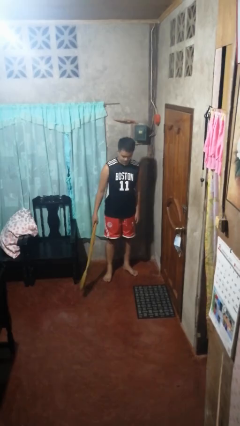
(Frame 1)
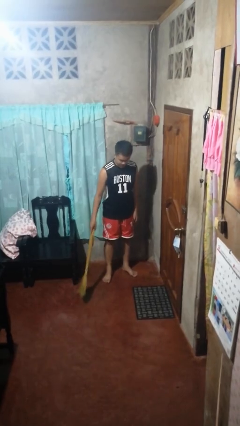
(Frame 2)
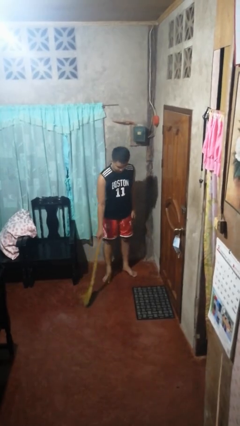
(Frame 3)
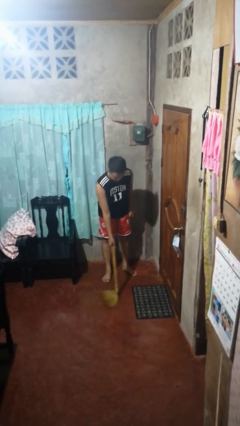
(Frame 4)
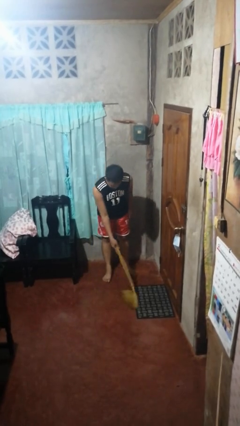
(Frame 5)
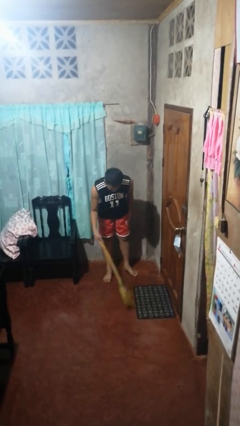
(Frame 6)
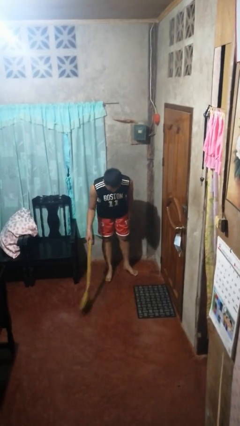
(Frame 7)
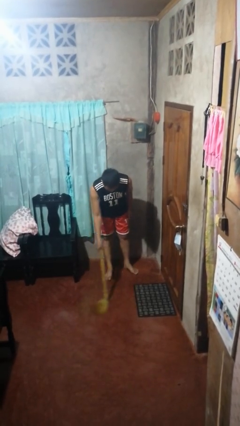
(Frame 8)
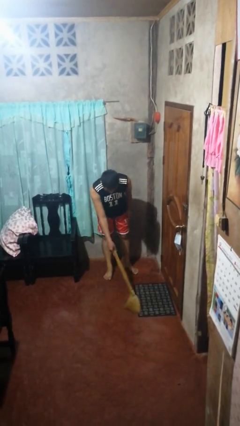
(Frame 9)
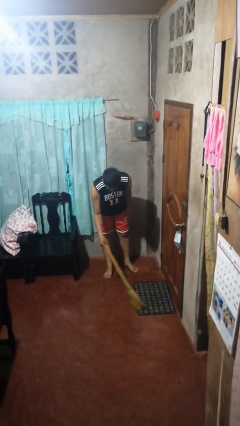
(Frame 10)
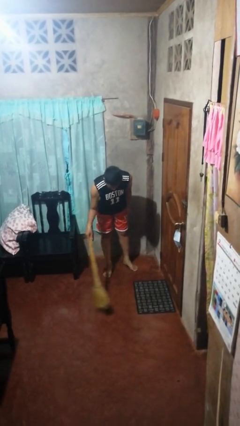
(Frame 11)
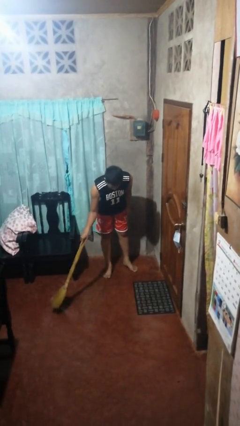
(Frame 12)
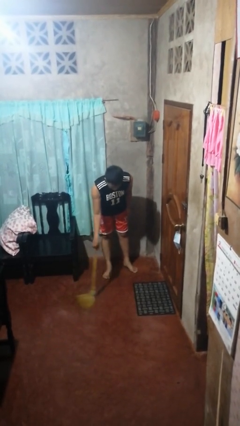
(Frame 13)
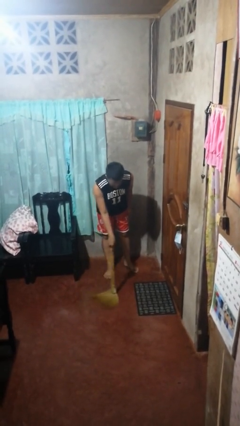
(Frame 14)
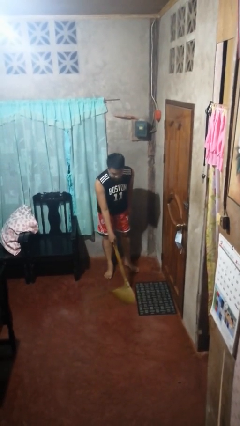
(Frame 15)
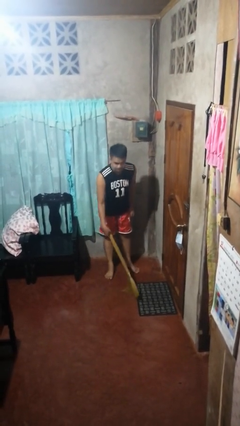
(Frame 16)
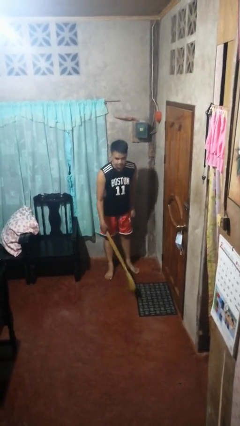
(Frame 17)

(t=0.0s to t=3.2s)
person sweeps floor

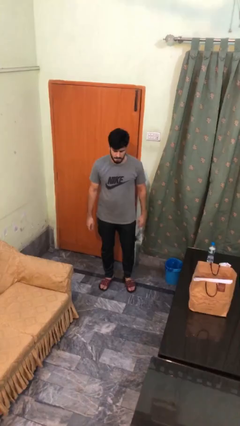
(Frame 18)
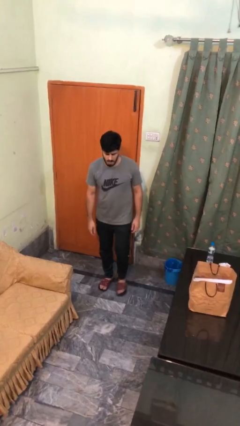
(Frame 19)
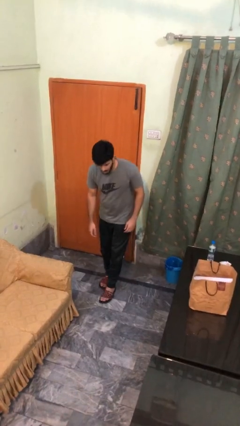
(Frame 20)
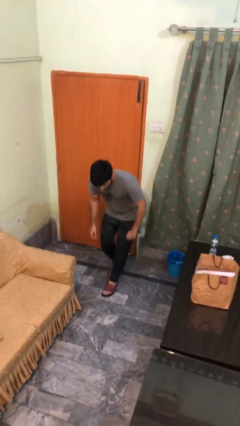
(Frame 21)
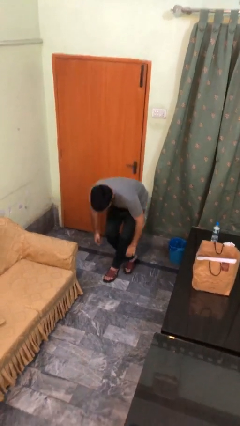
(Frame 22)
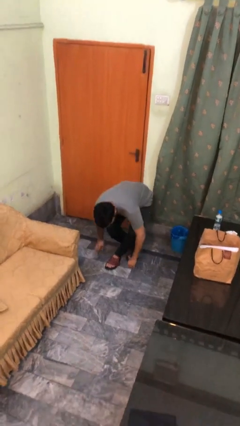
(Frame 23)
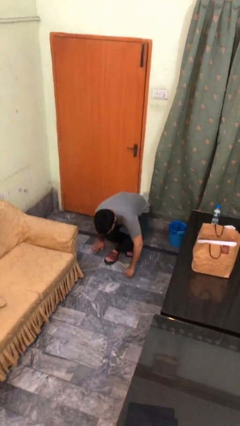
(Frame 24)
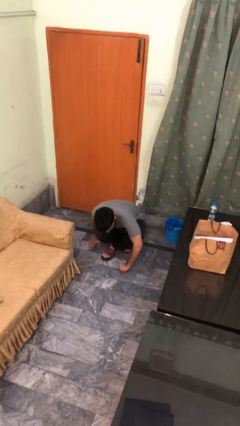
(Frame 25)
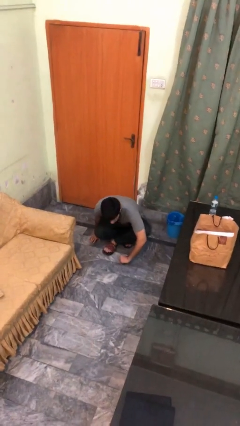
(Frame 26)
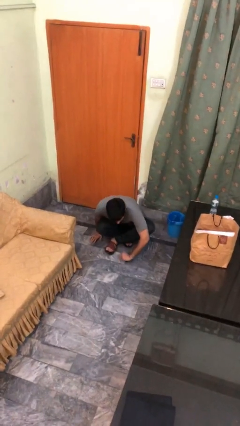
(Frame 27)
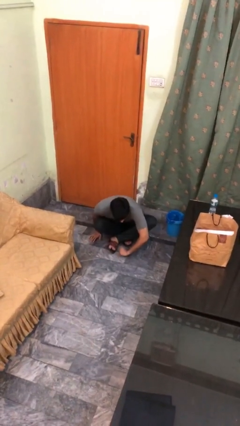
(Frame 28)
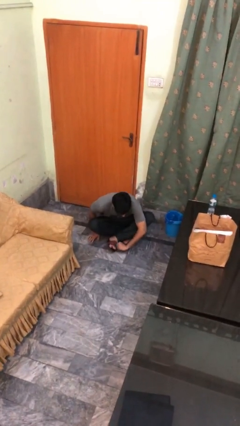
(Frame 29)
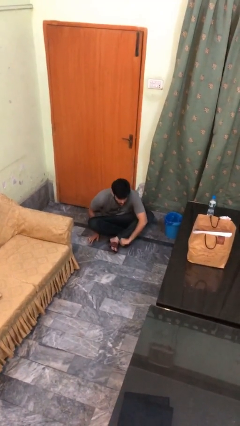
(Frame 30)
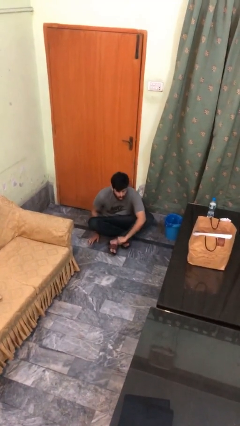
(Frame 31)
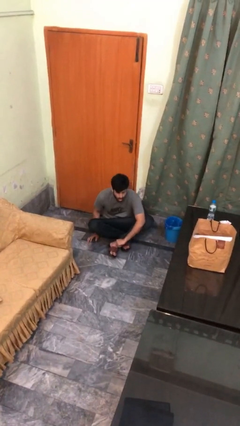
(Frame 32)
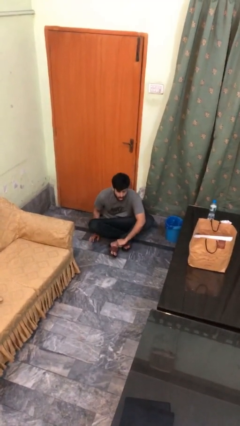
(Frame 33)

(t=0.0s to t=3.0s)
person sits crisscross

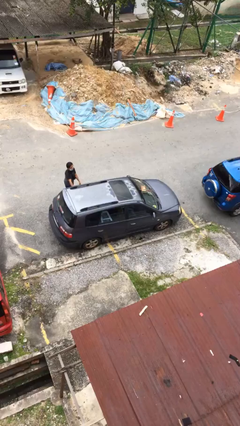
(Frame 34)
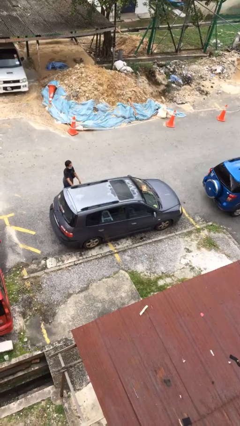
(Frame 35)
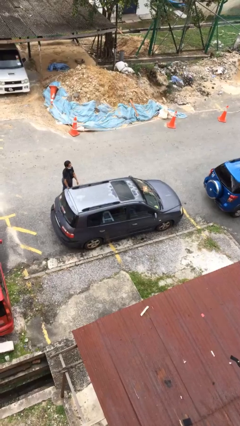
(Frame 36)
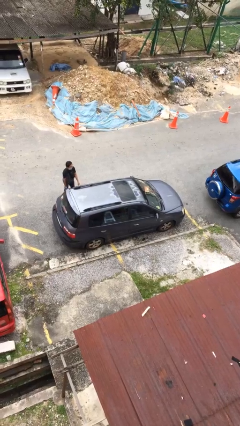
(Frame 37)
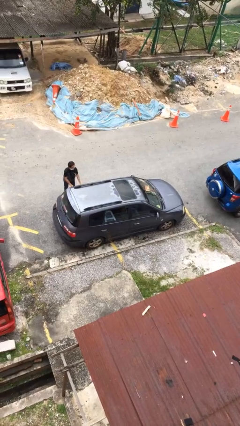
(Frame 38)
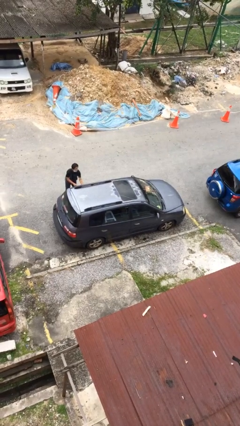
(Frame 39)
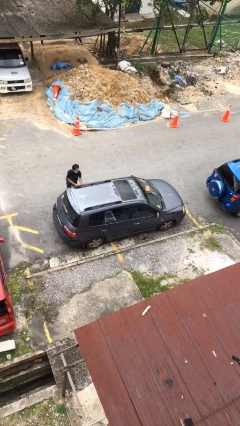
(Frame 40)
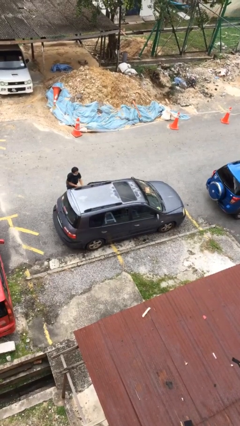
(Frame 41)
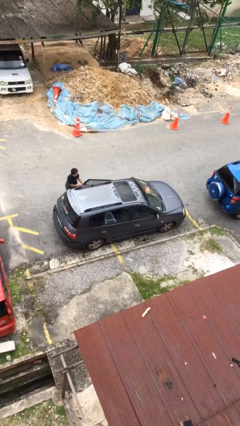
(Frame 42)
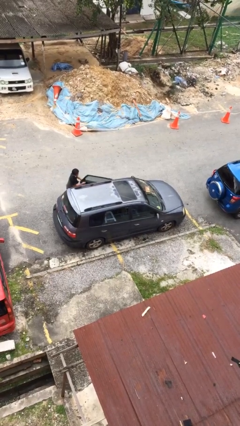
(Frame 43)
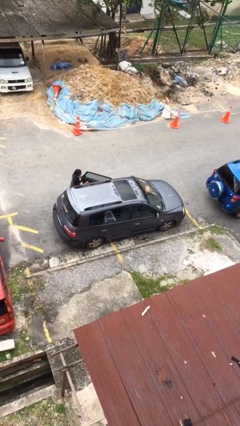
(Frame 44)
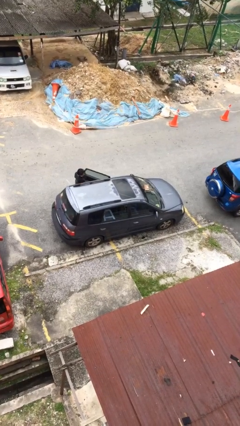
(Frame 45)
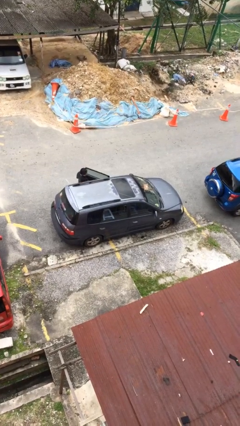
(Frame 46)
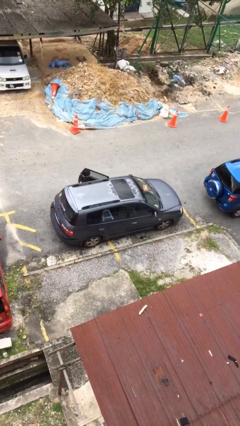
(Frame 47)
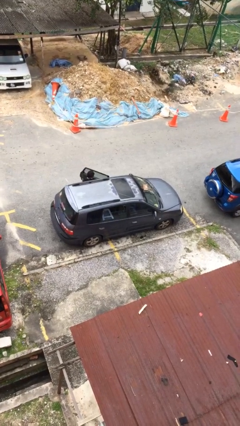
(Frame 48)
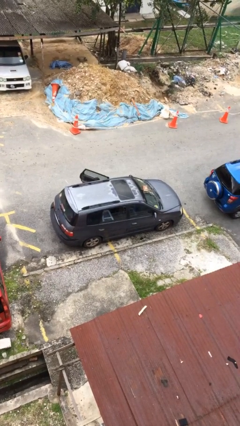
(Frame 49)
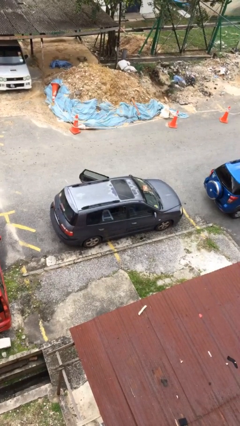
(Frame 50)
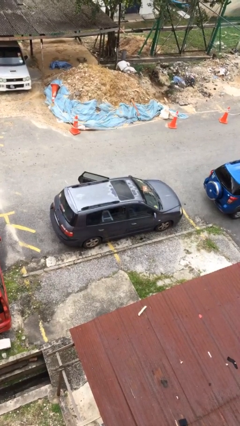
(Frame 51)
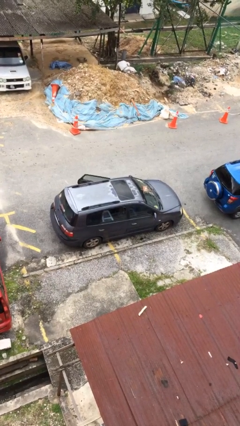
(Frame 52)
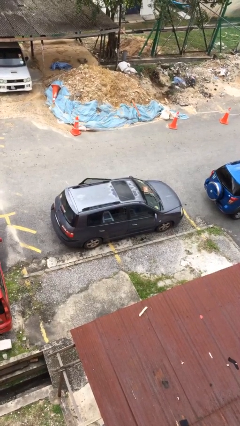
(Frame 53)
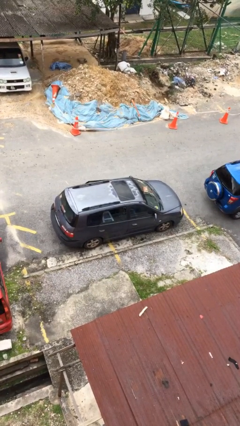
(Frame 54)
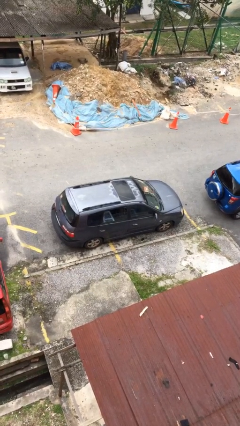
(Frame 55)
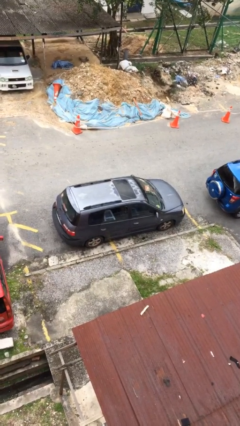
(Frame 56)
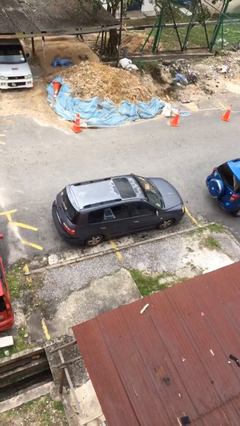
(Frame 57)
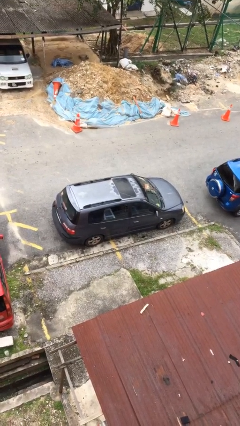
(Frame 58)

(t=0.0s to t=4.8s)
car picks up person

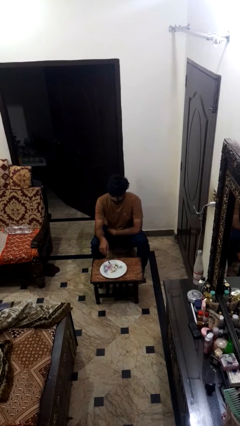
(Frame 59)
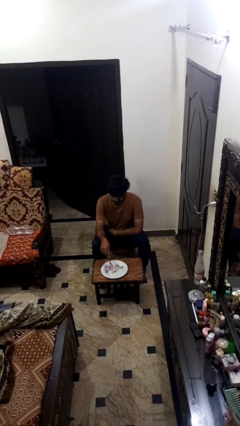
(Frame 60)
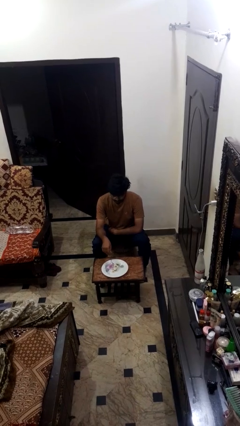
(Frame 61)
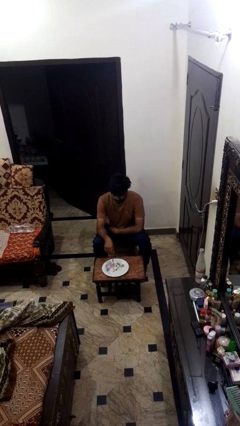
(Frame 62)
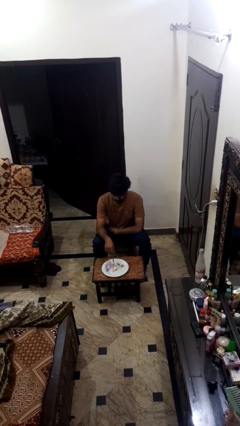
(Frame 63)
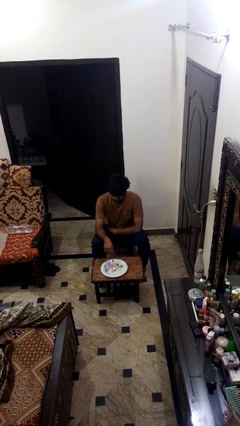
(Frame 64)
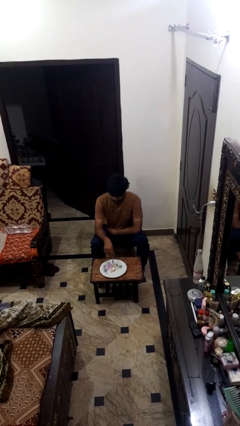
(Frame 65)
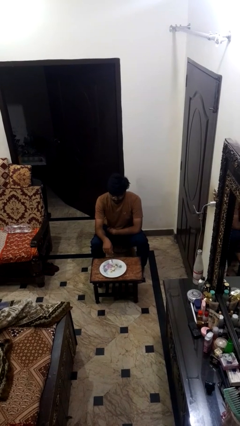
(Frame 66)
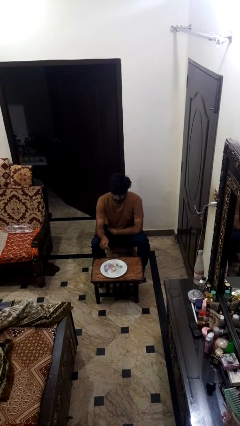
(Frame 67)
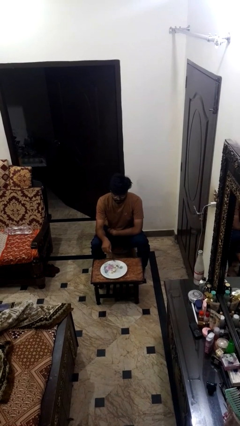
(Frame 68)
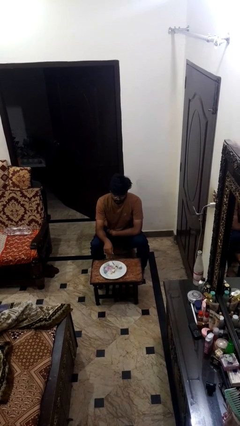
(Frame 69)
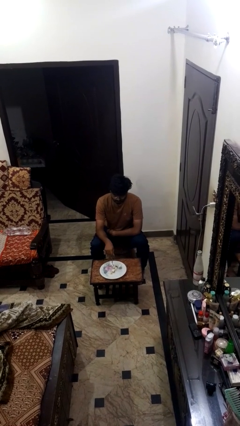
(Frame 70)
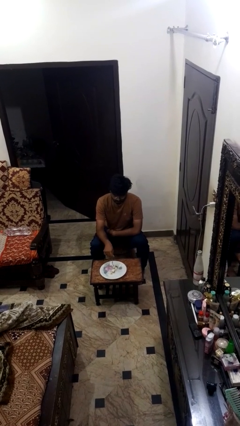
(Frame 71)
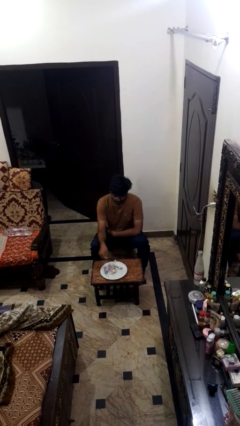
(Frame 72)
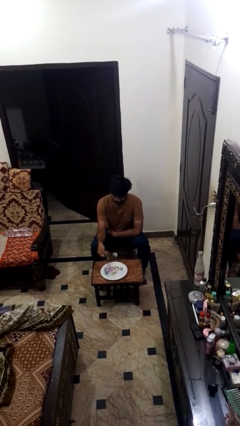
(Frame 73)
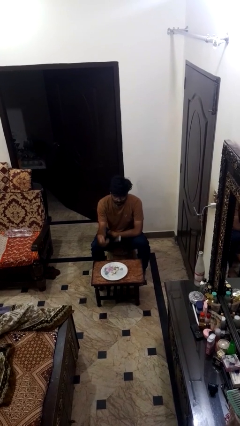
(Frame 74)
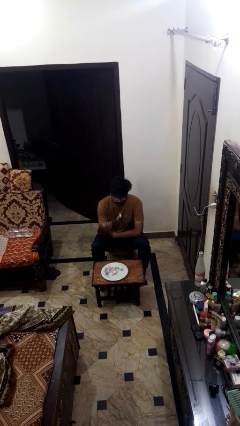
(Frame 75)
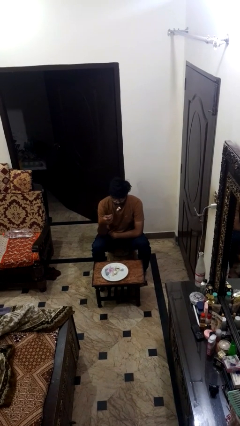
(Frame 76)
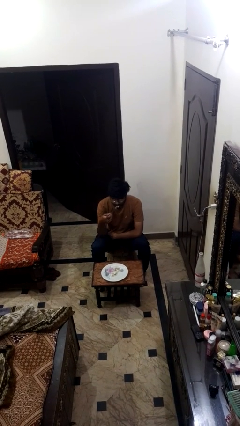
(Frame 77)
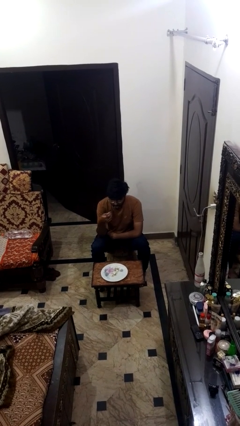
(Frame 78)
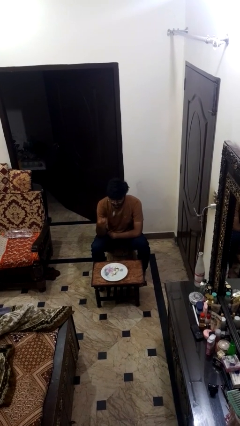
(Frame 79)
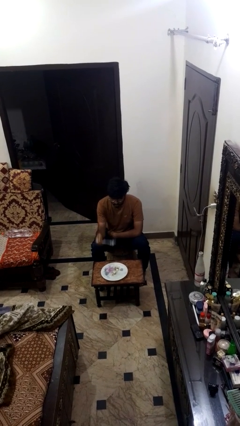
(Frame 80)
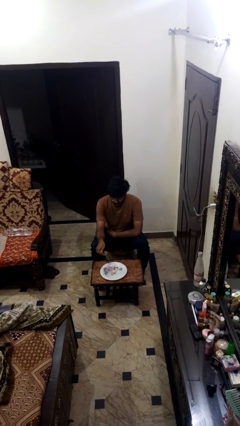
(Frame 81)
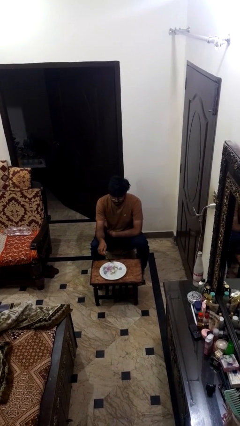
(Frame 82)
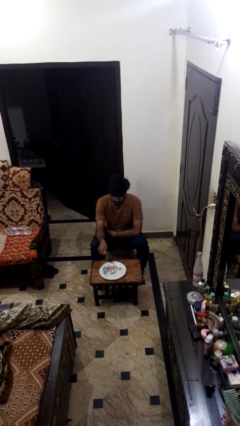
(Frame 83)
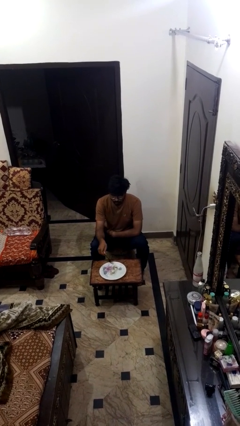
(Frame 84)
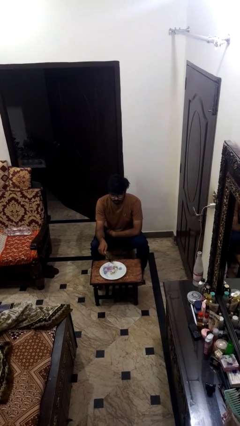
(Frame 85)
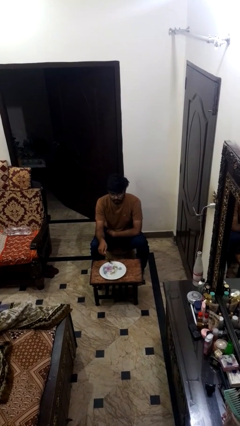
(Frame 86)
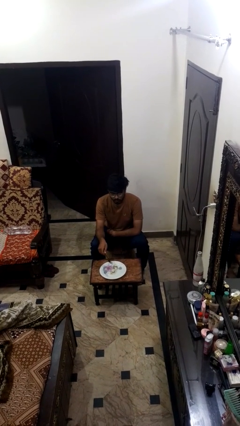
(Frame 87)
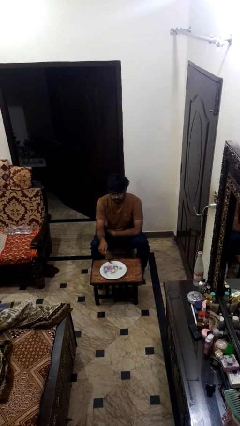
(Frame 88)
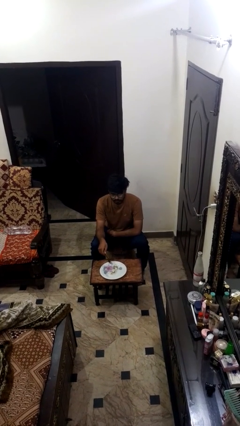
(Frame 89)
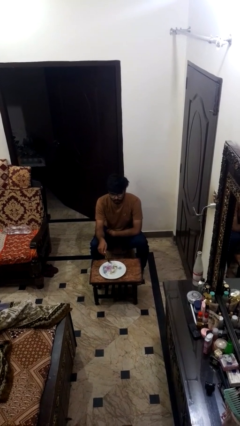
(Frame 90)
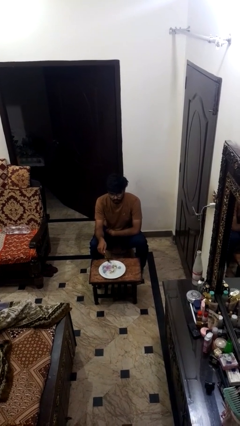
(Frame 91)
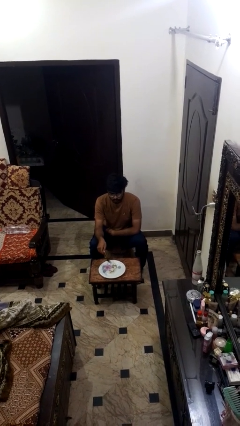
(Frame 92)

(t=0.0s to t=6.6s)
person eats with utensil
